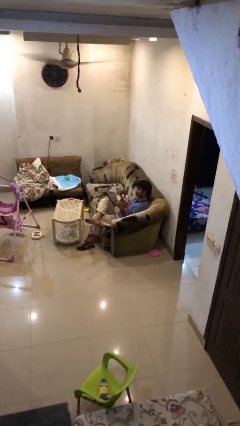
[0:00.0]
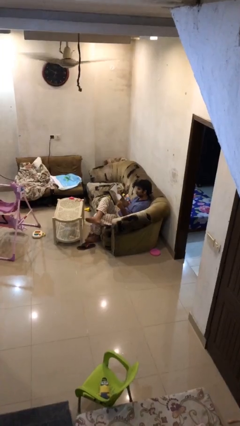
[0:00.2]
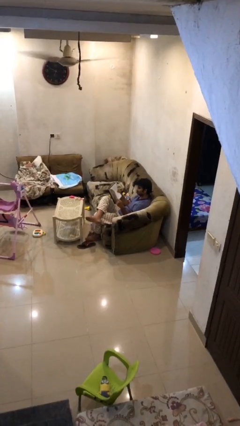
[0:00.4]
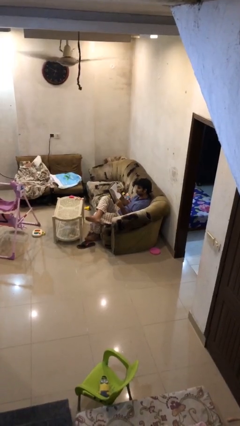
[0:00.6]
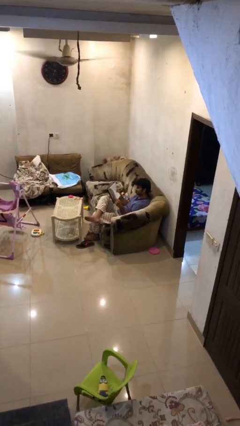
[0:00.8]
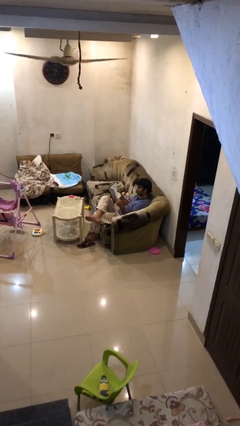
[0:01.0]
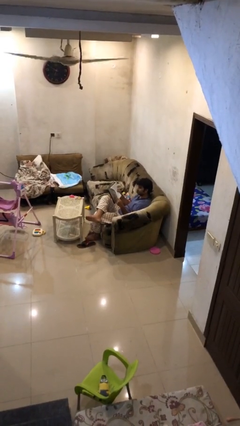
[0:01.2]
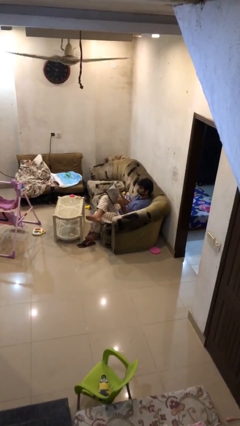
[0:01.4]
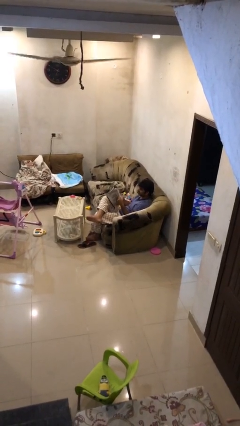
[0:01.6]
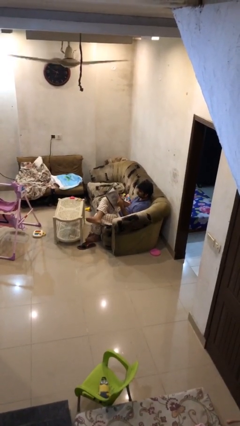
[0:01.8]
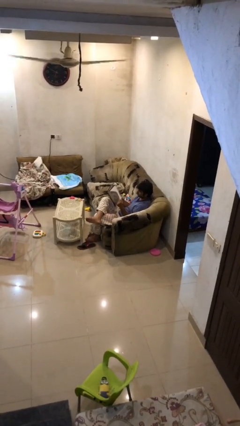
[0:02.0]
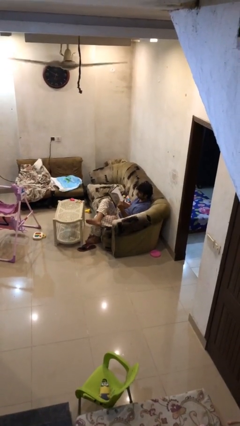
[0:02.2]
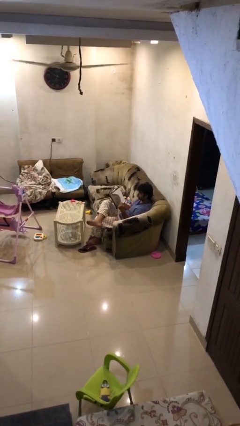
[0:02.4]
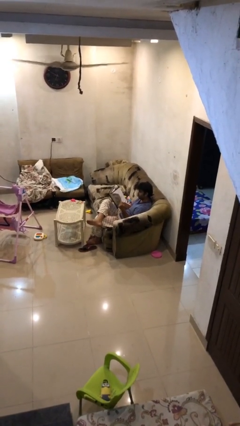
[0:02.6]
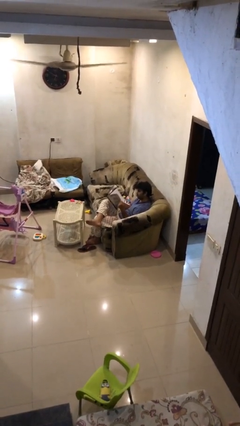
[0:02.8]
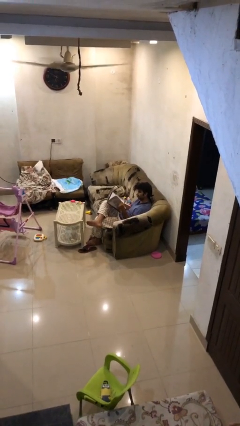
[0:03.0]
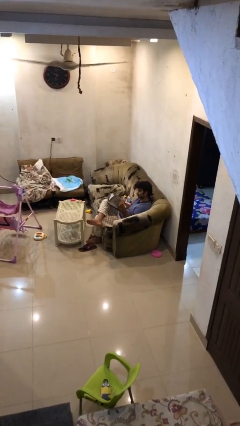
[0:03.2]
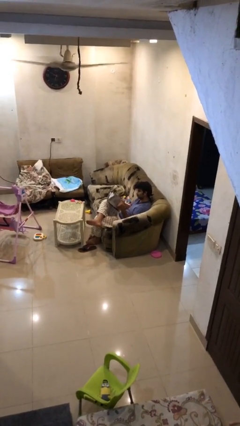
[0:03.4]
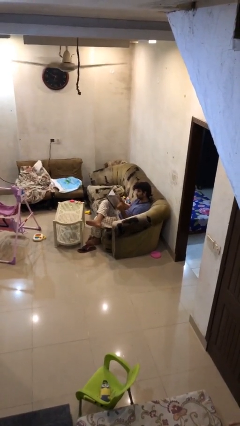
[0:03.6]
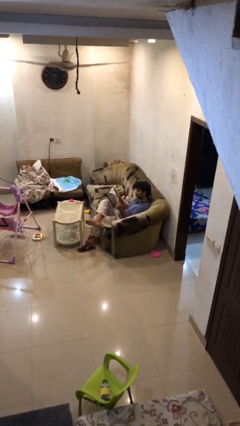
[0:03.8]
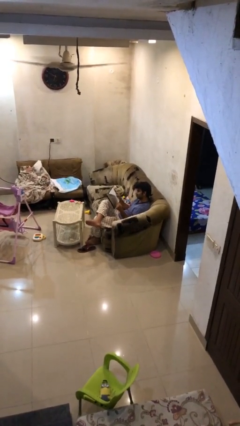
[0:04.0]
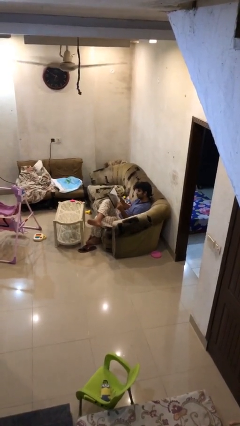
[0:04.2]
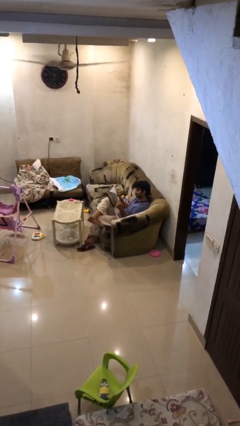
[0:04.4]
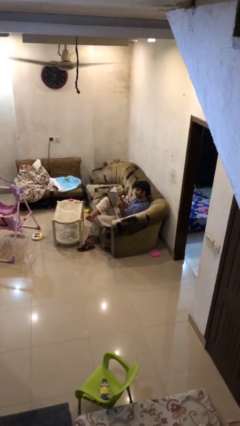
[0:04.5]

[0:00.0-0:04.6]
person reads document

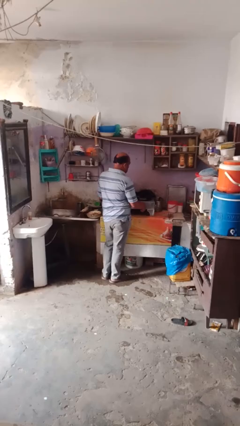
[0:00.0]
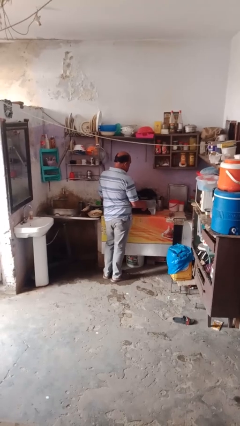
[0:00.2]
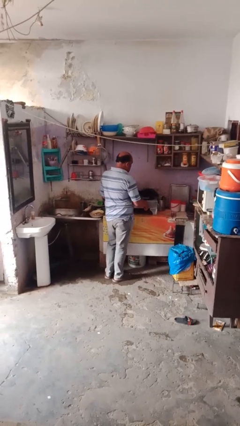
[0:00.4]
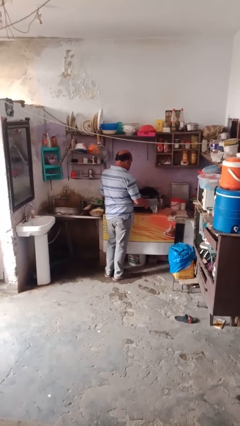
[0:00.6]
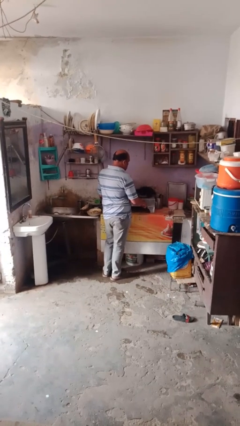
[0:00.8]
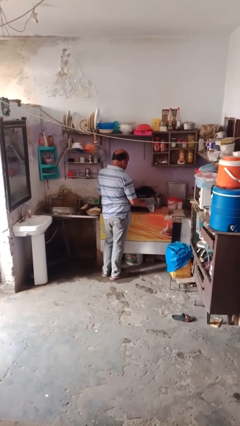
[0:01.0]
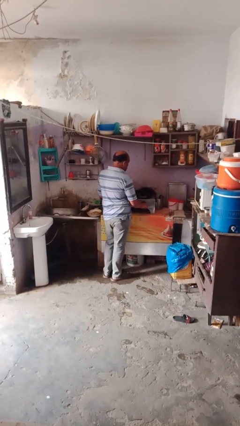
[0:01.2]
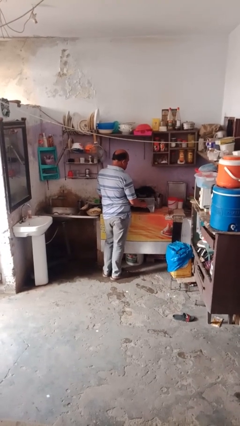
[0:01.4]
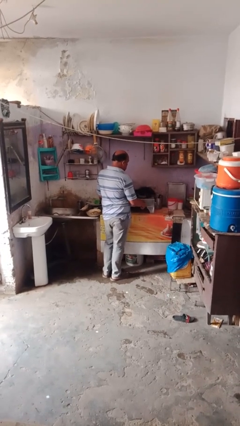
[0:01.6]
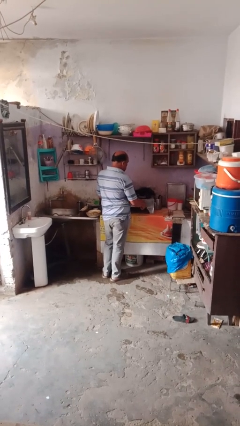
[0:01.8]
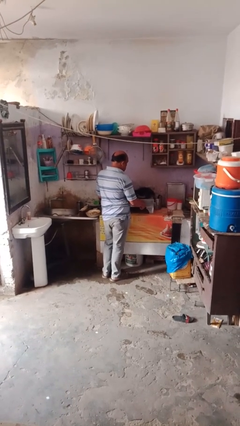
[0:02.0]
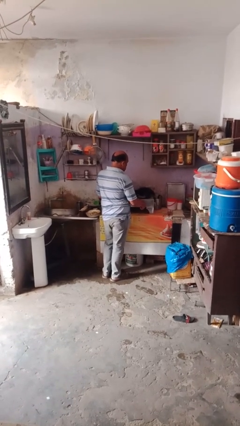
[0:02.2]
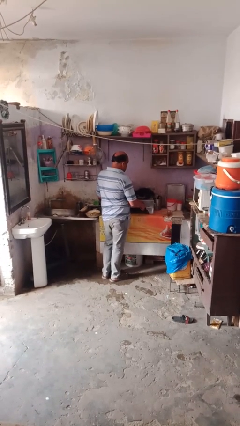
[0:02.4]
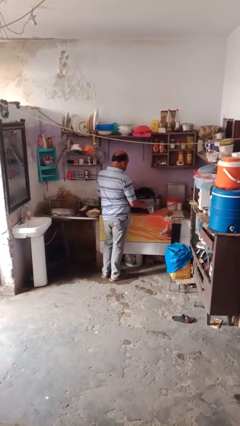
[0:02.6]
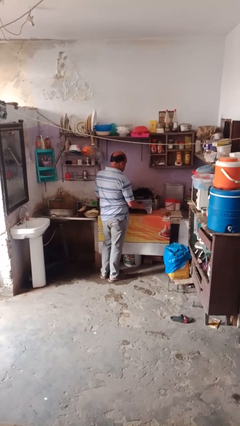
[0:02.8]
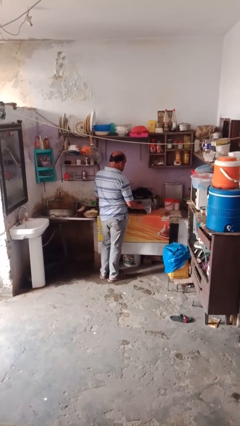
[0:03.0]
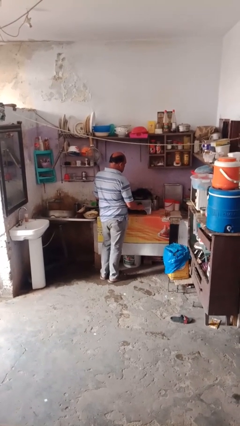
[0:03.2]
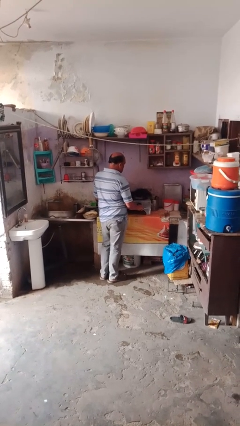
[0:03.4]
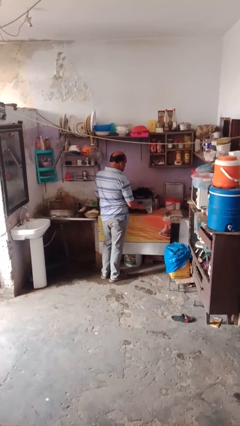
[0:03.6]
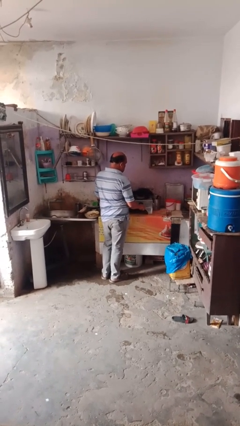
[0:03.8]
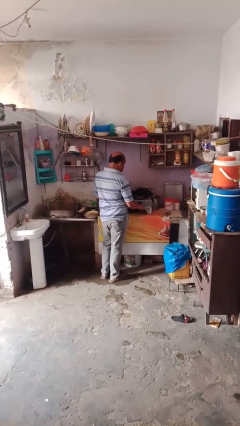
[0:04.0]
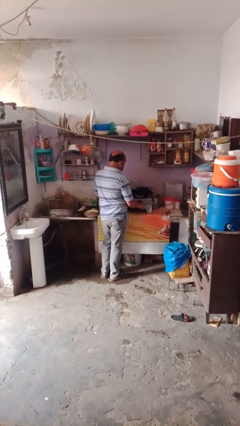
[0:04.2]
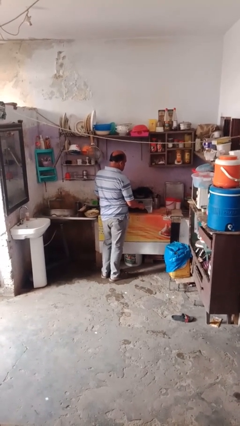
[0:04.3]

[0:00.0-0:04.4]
person turns on stovetop

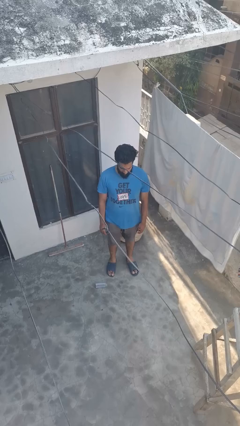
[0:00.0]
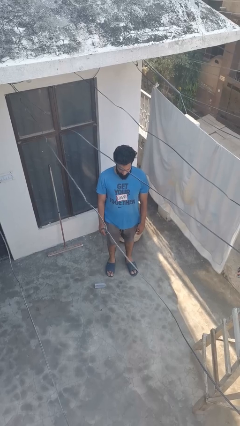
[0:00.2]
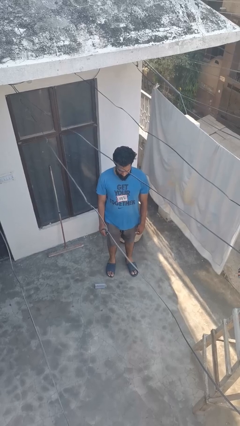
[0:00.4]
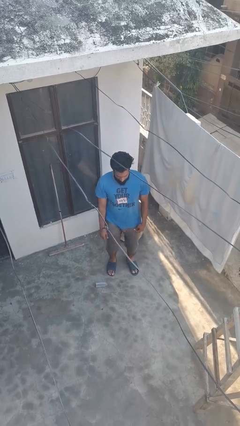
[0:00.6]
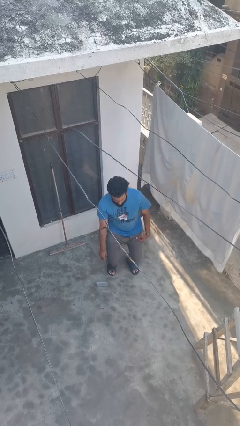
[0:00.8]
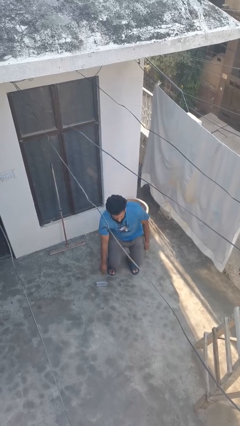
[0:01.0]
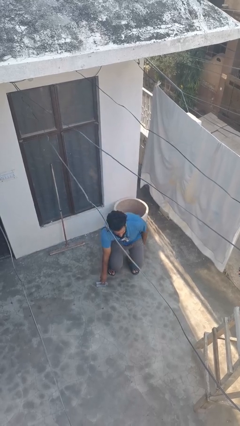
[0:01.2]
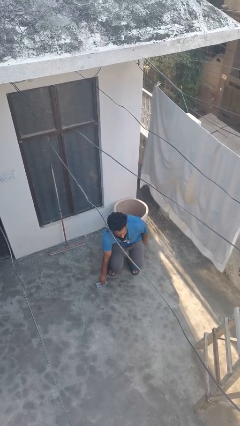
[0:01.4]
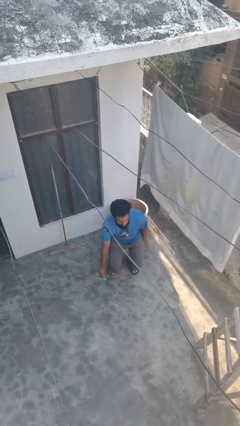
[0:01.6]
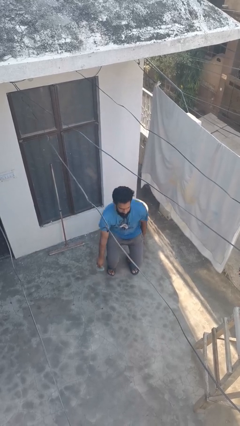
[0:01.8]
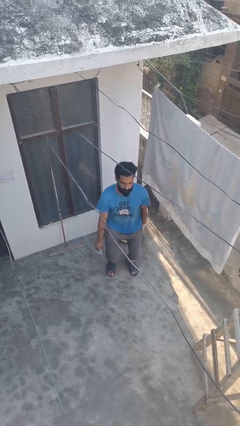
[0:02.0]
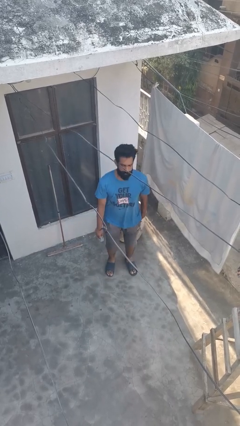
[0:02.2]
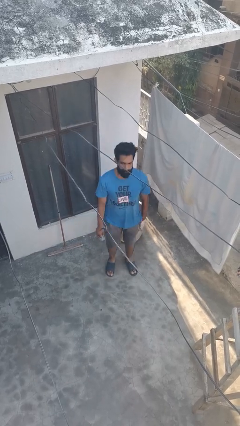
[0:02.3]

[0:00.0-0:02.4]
person picks up object from floor

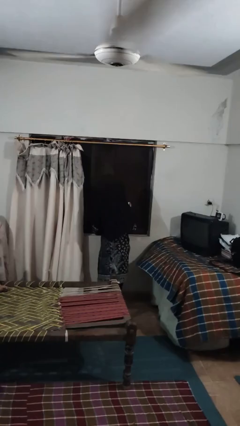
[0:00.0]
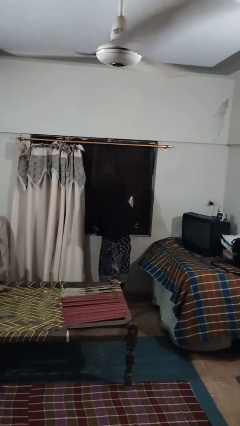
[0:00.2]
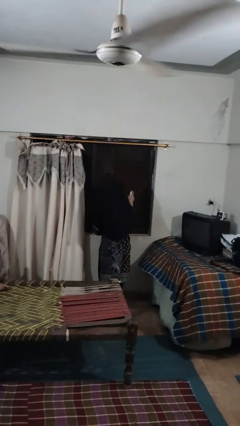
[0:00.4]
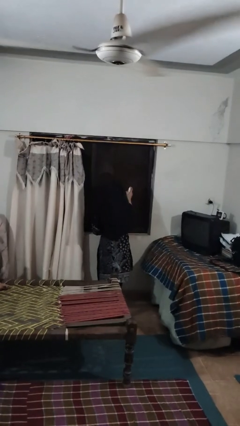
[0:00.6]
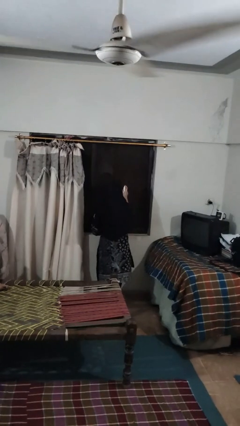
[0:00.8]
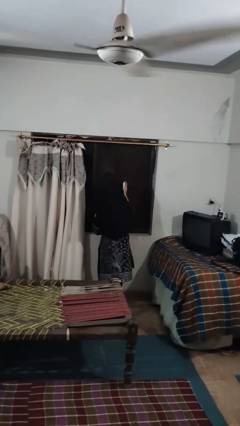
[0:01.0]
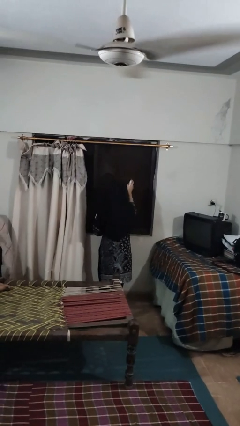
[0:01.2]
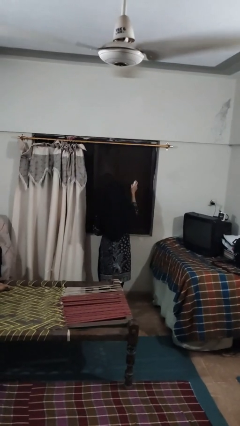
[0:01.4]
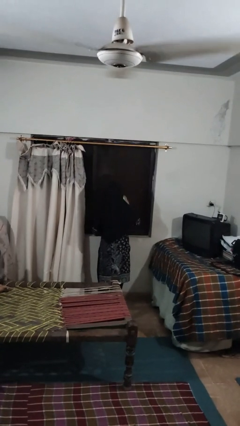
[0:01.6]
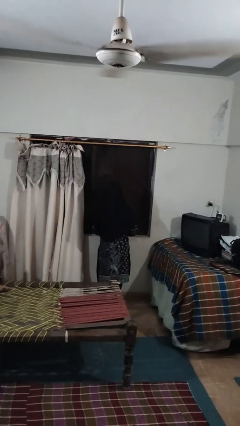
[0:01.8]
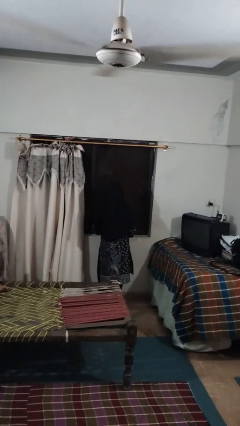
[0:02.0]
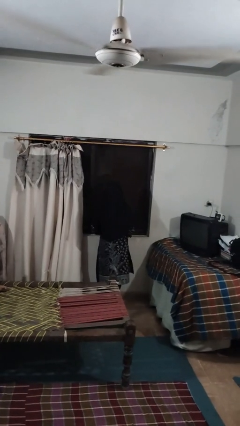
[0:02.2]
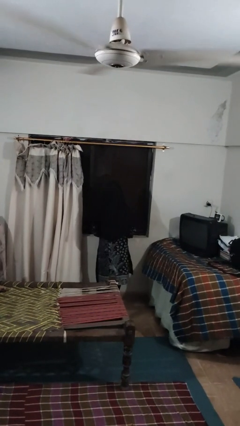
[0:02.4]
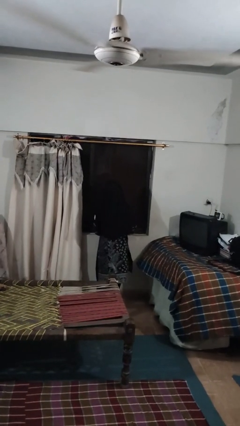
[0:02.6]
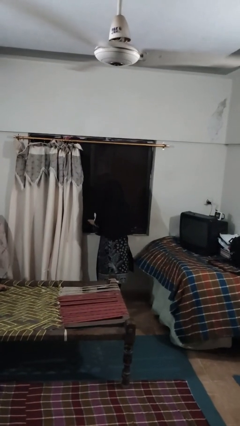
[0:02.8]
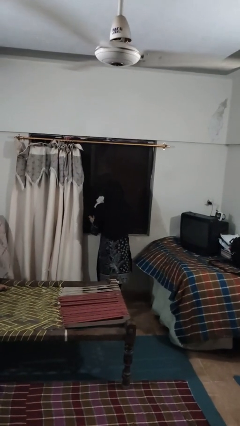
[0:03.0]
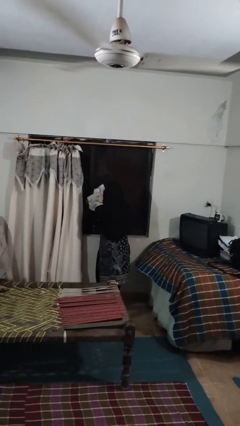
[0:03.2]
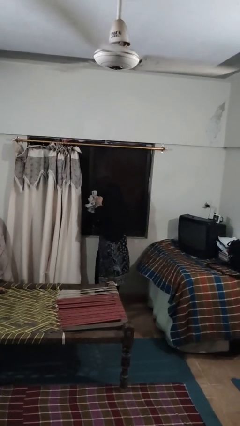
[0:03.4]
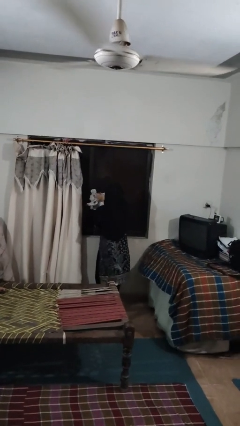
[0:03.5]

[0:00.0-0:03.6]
person sprays from bottle

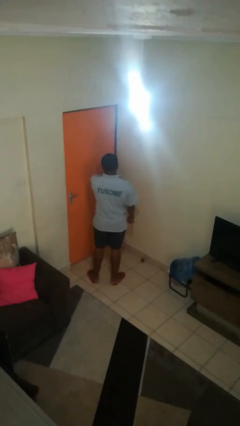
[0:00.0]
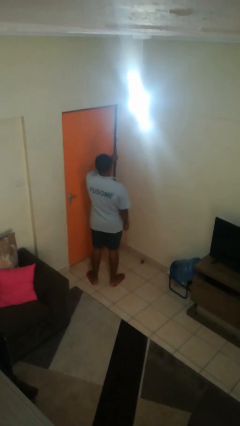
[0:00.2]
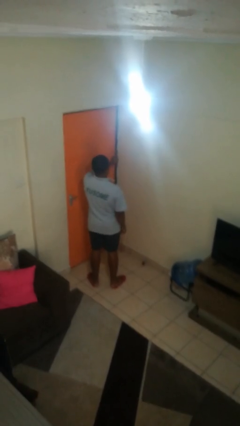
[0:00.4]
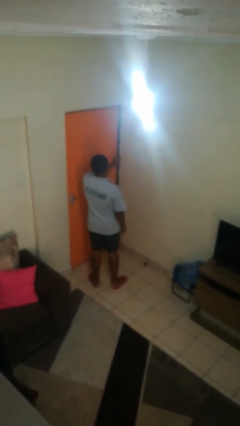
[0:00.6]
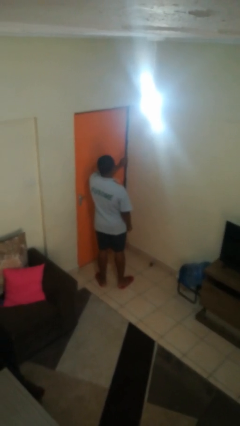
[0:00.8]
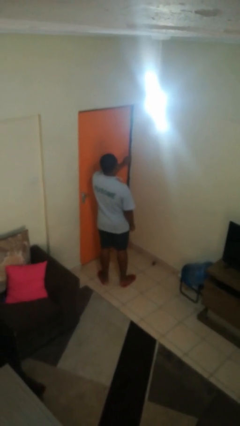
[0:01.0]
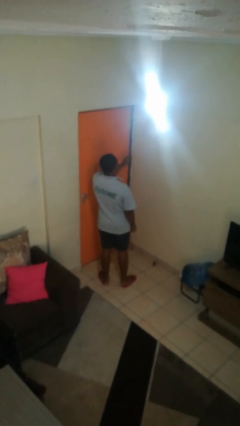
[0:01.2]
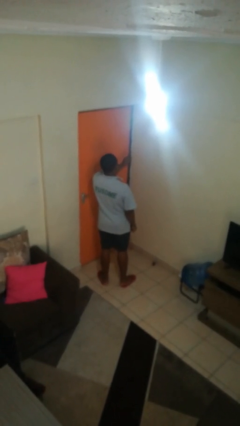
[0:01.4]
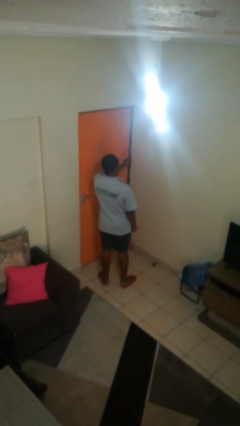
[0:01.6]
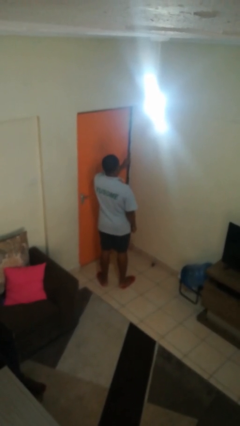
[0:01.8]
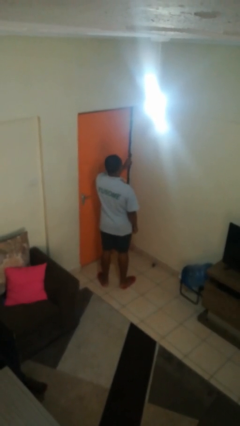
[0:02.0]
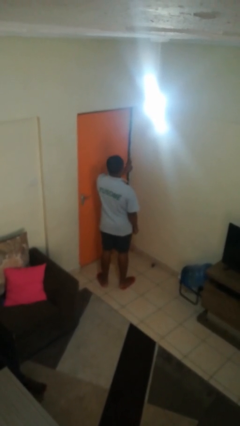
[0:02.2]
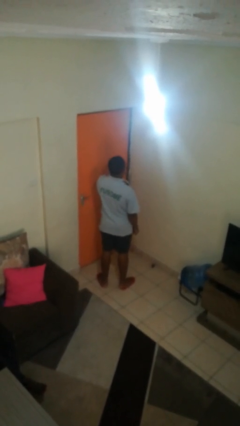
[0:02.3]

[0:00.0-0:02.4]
person gestures number one
